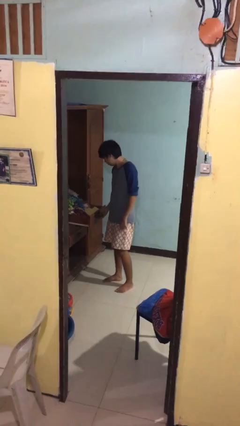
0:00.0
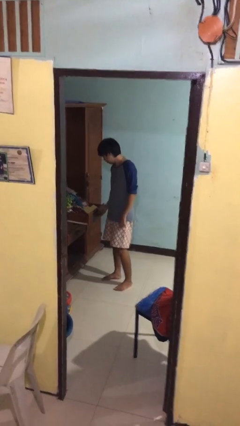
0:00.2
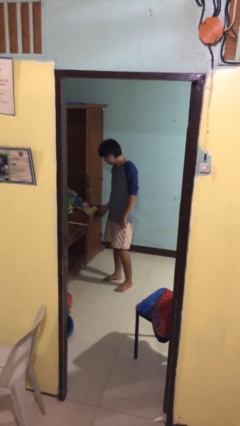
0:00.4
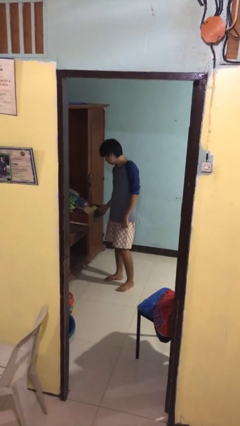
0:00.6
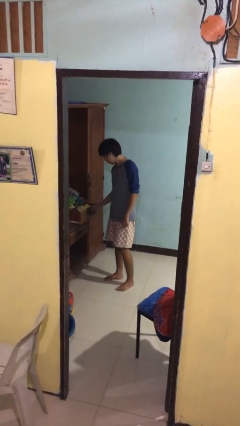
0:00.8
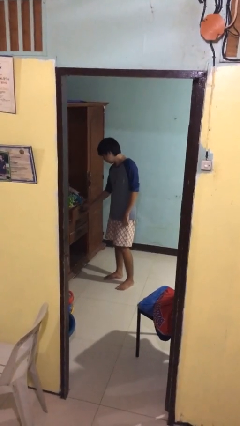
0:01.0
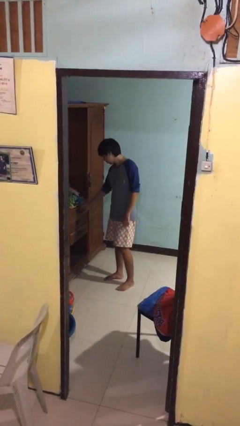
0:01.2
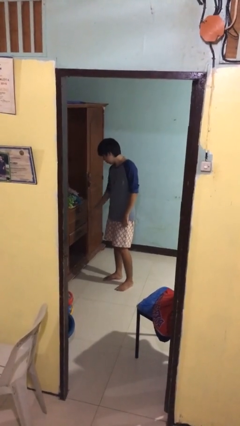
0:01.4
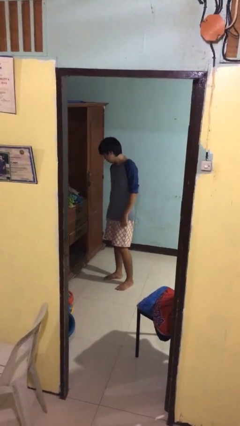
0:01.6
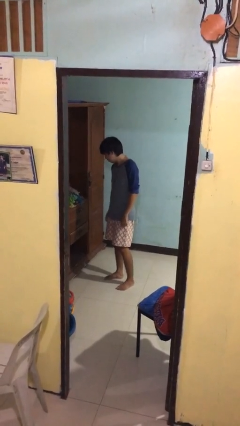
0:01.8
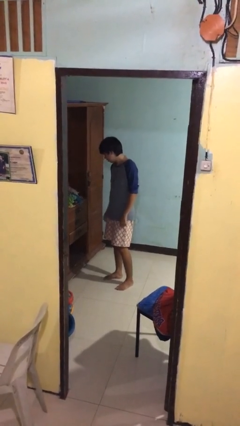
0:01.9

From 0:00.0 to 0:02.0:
person closes dresser drawer

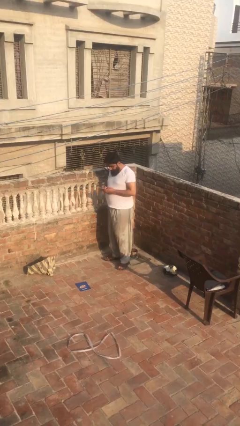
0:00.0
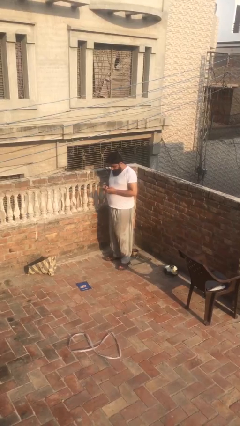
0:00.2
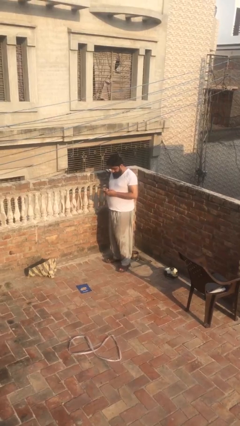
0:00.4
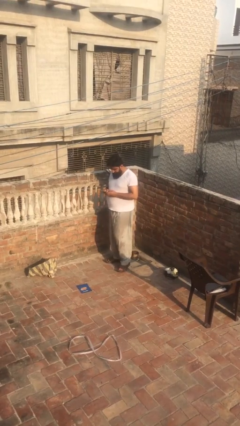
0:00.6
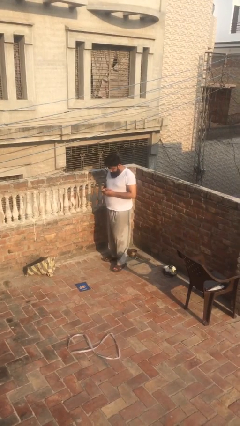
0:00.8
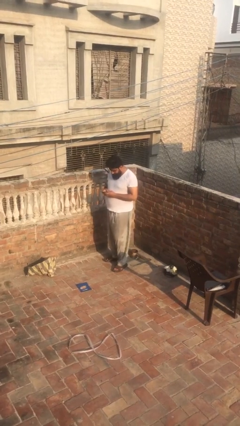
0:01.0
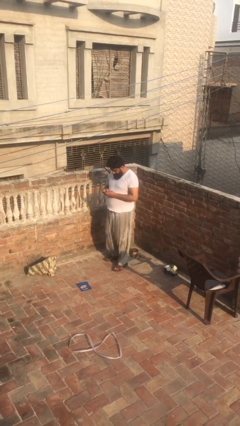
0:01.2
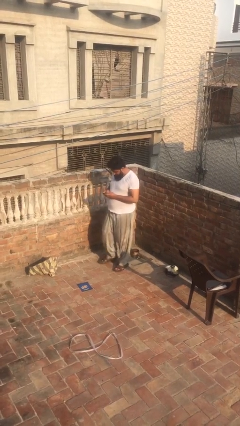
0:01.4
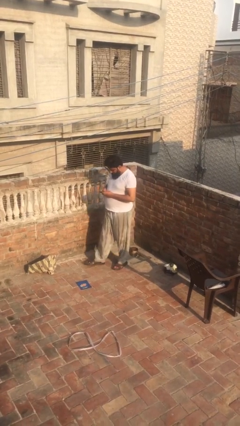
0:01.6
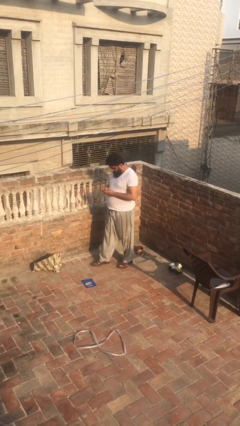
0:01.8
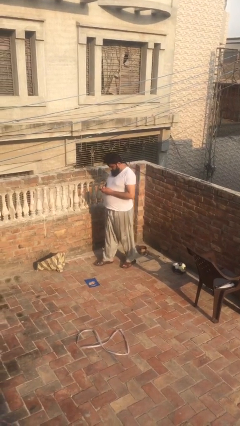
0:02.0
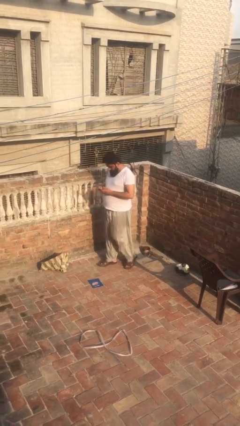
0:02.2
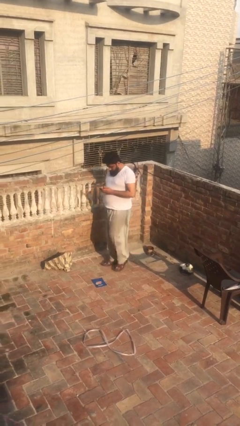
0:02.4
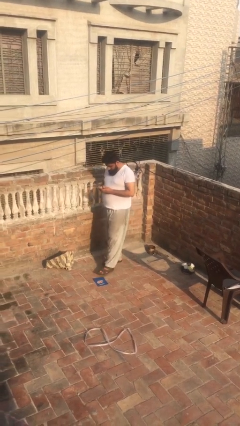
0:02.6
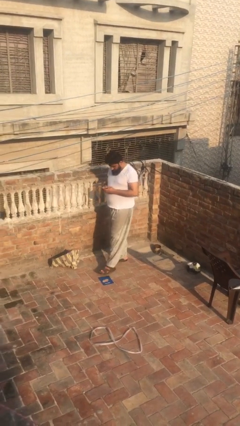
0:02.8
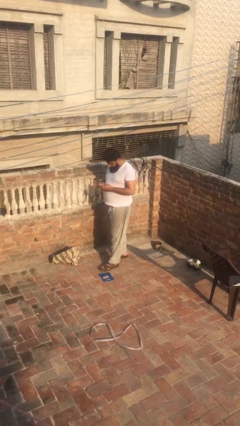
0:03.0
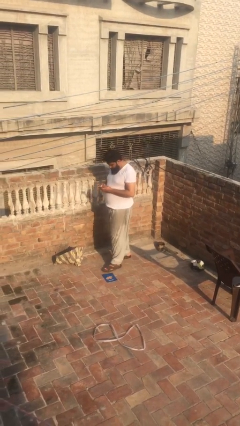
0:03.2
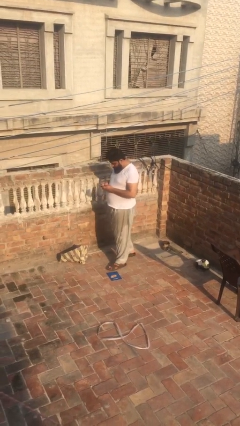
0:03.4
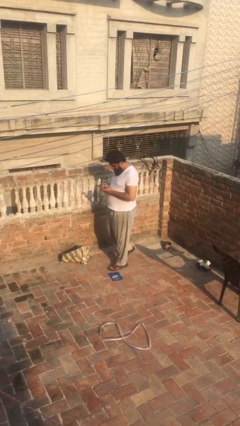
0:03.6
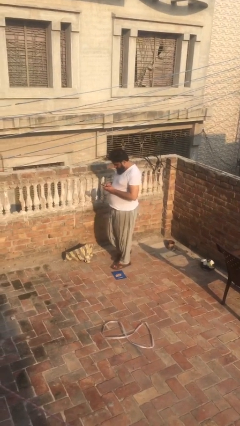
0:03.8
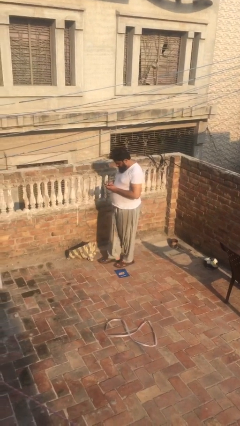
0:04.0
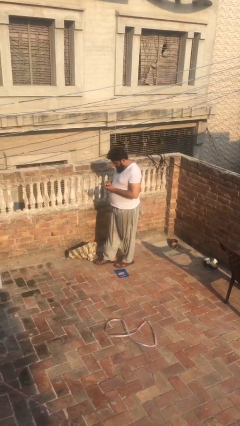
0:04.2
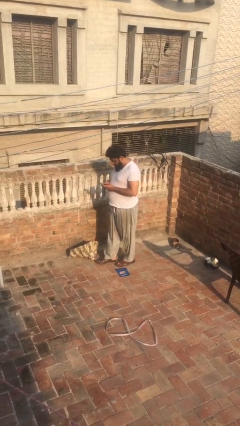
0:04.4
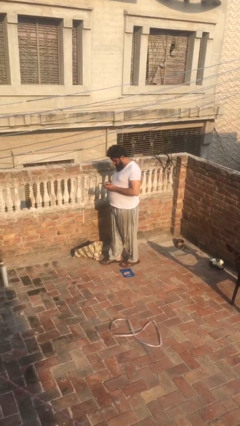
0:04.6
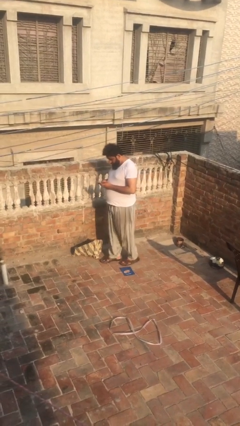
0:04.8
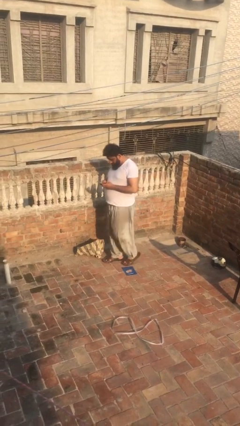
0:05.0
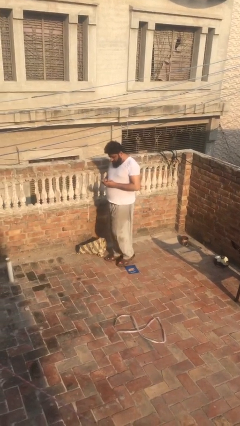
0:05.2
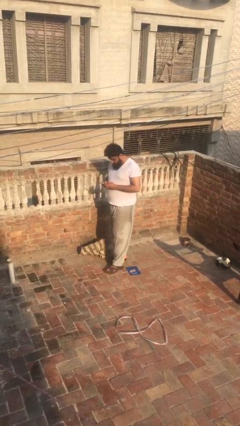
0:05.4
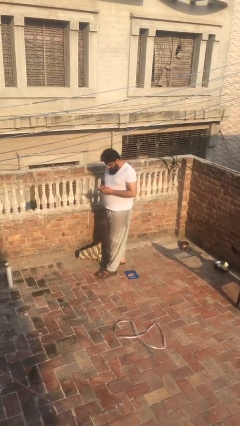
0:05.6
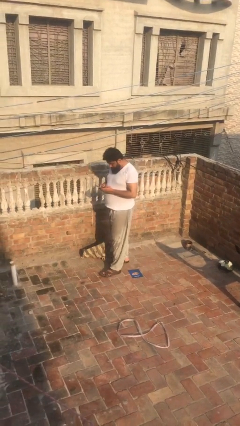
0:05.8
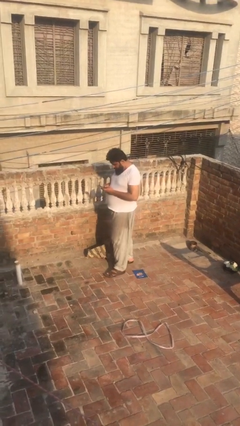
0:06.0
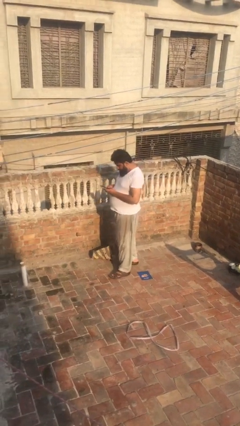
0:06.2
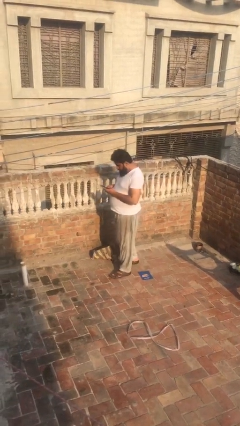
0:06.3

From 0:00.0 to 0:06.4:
person texts on phone

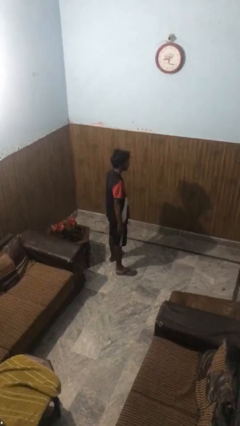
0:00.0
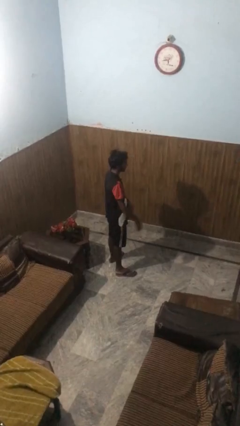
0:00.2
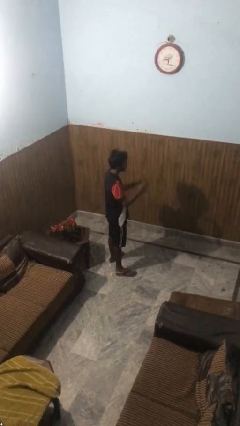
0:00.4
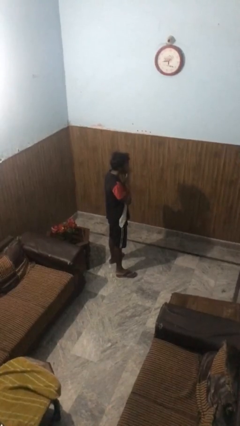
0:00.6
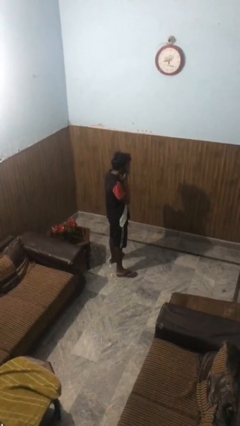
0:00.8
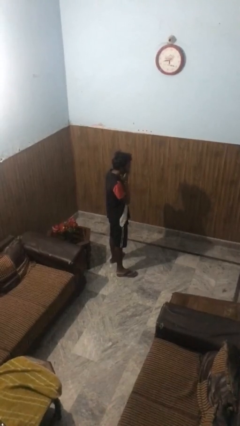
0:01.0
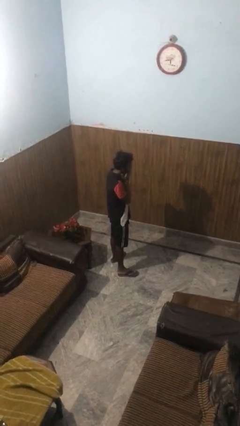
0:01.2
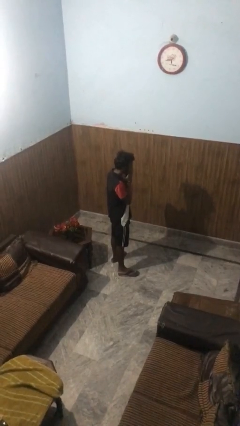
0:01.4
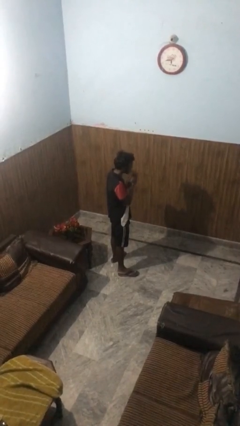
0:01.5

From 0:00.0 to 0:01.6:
person covers face with hands

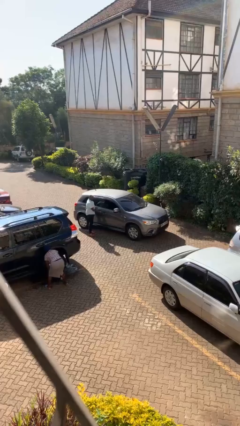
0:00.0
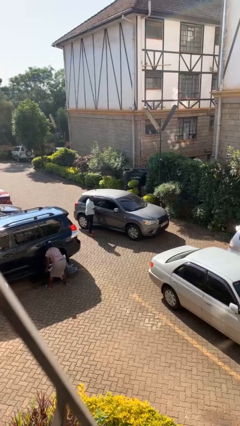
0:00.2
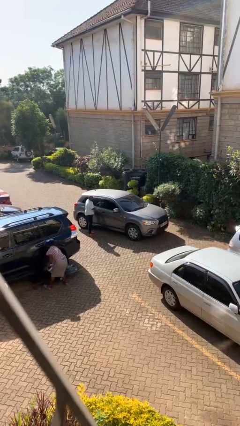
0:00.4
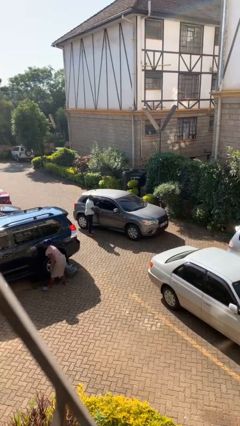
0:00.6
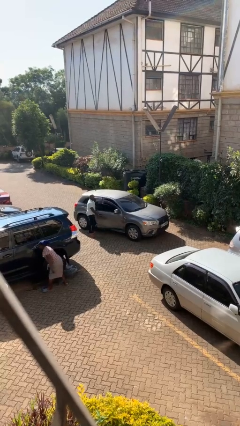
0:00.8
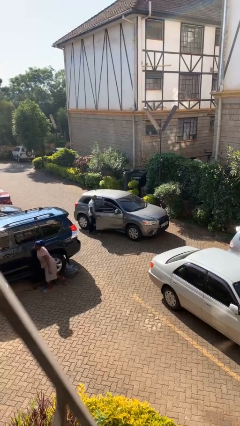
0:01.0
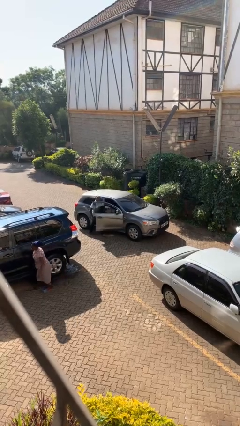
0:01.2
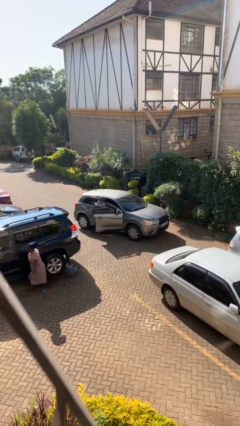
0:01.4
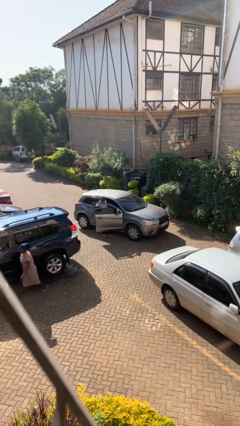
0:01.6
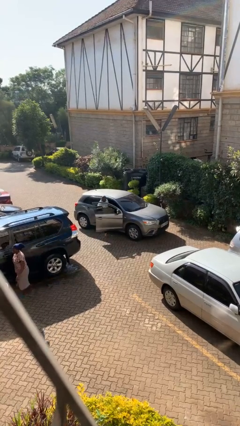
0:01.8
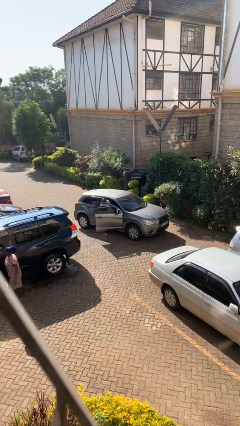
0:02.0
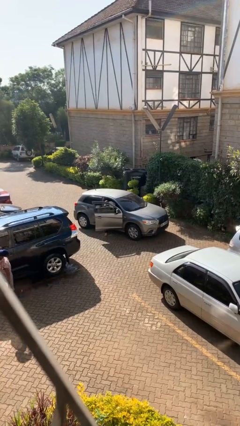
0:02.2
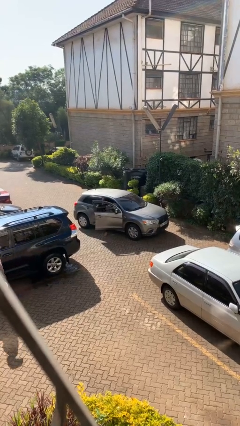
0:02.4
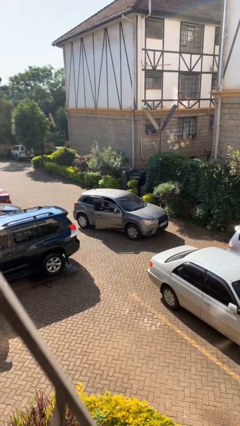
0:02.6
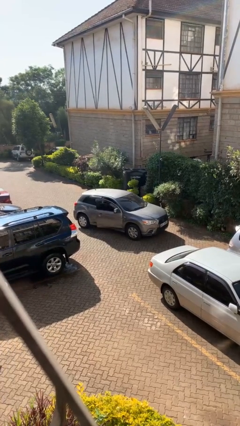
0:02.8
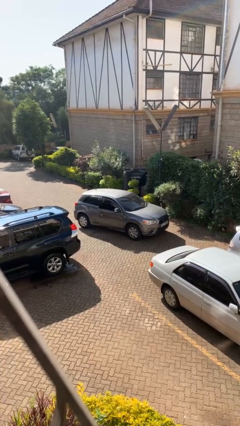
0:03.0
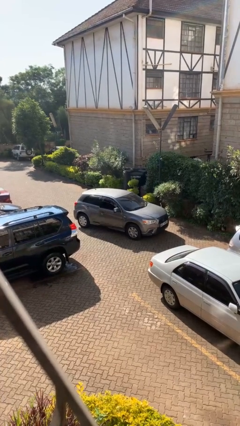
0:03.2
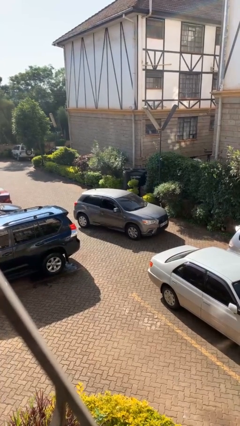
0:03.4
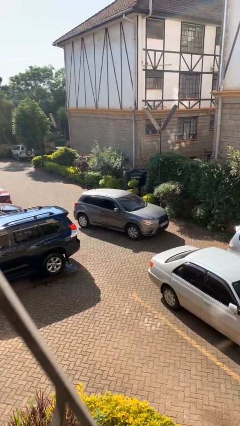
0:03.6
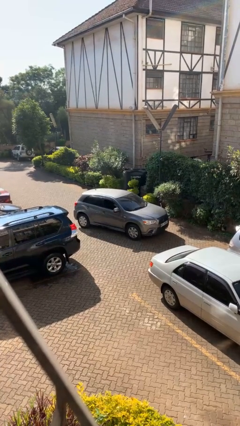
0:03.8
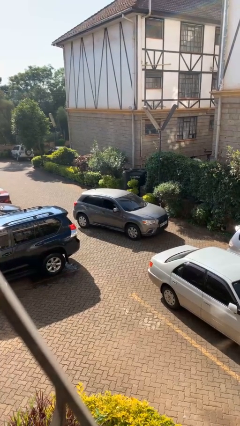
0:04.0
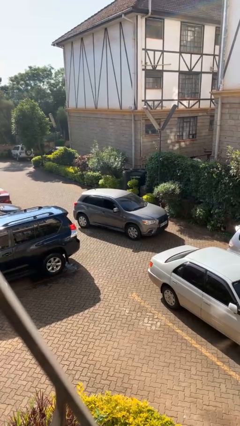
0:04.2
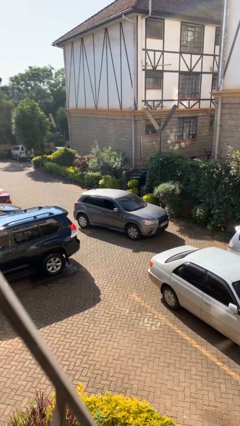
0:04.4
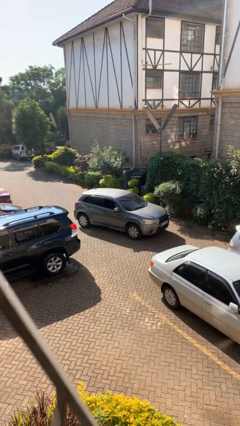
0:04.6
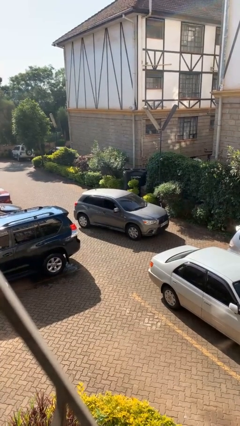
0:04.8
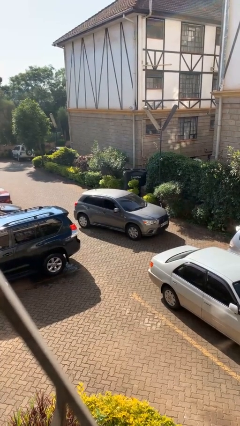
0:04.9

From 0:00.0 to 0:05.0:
car picks up person

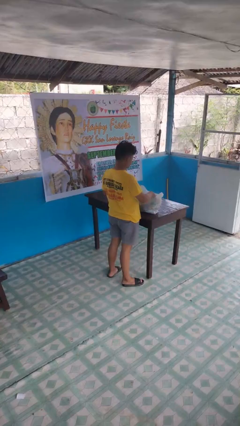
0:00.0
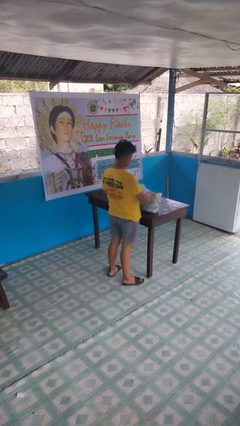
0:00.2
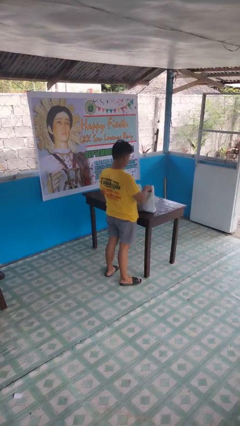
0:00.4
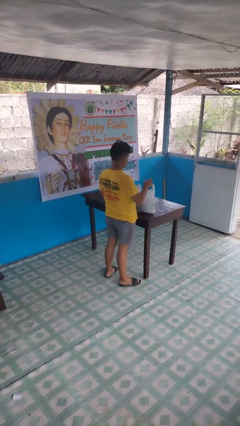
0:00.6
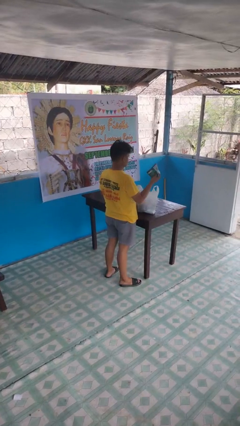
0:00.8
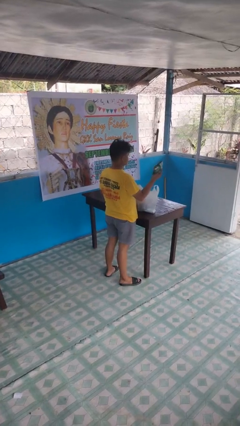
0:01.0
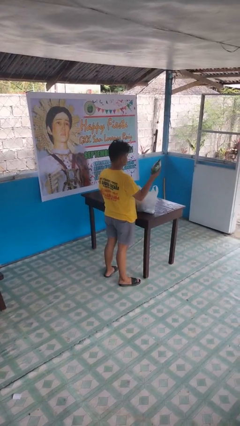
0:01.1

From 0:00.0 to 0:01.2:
person takes object from bag

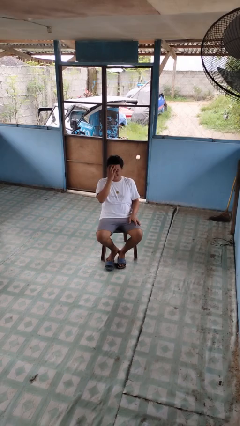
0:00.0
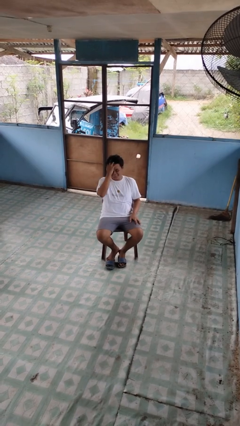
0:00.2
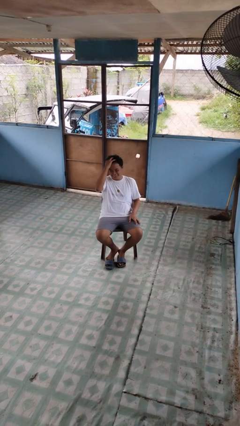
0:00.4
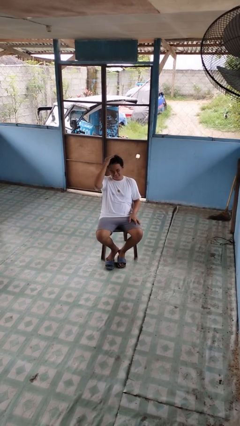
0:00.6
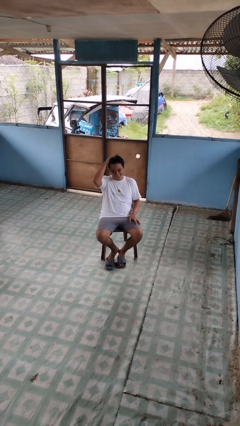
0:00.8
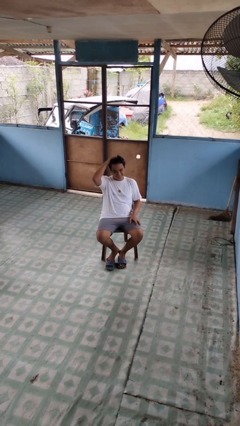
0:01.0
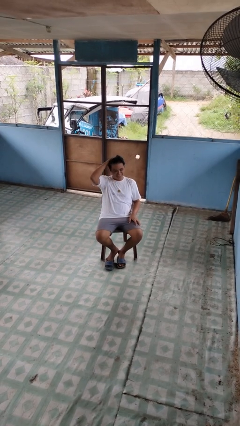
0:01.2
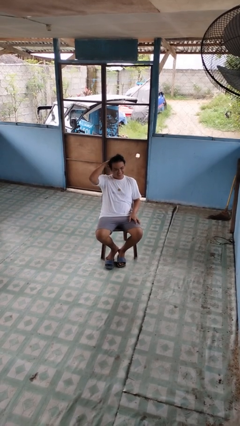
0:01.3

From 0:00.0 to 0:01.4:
person strokes hair
